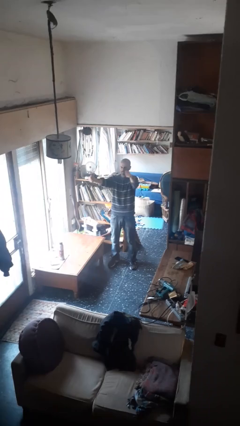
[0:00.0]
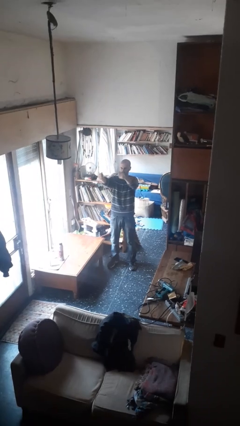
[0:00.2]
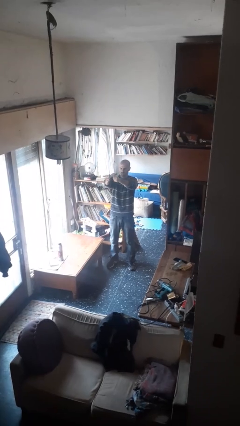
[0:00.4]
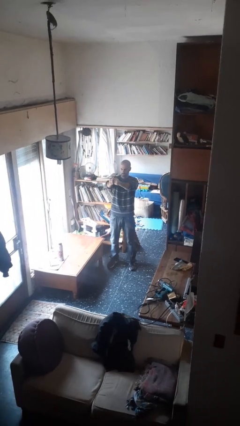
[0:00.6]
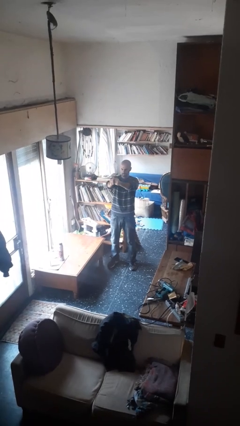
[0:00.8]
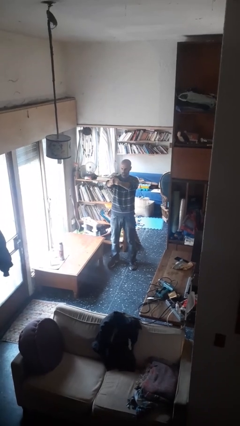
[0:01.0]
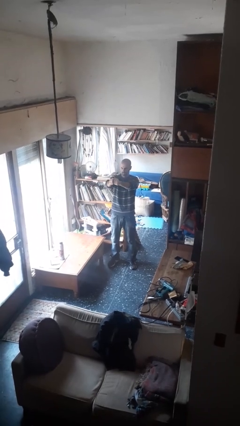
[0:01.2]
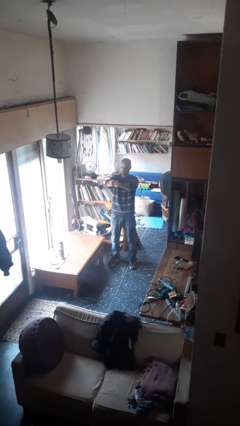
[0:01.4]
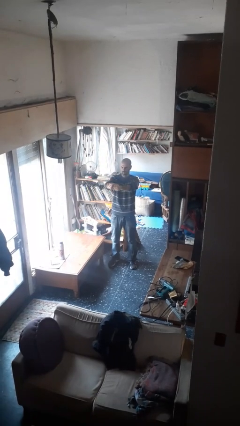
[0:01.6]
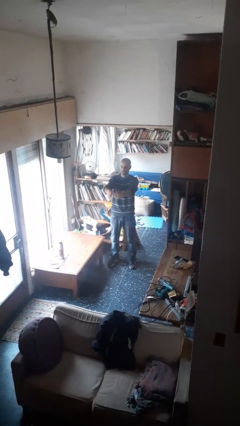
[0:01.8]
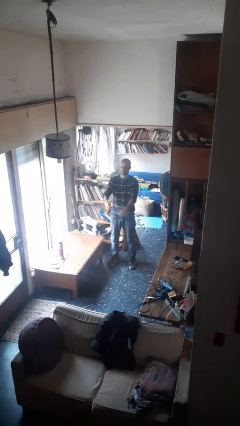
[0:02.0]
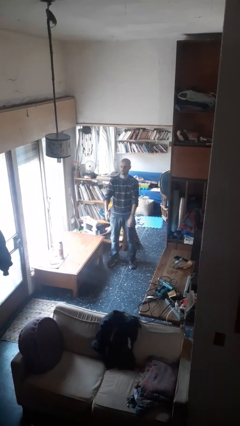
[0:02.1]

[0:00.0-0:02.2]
person gestures zoom out

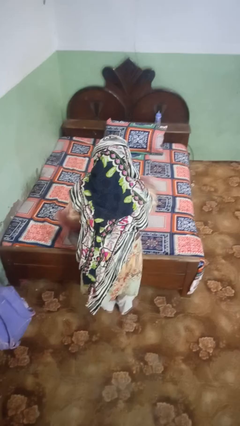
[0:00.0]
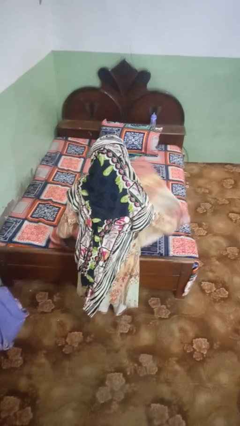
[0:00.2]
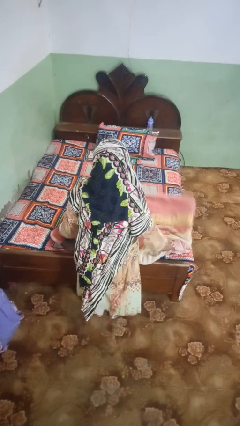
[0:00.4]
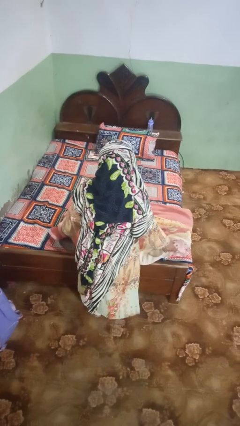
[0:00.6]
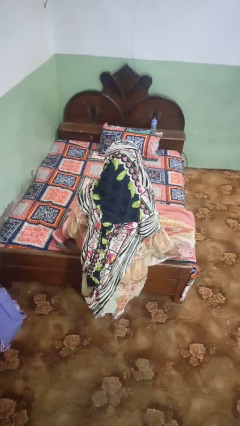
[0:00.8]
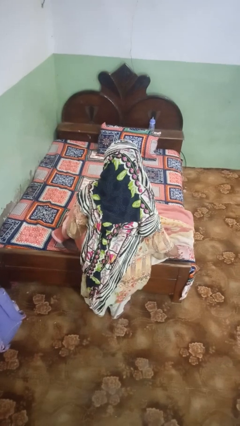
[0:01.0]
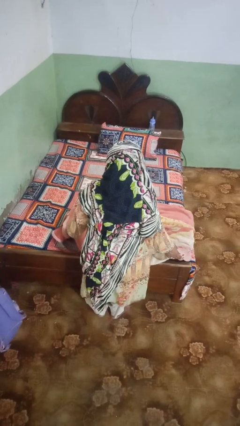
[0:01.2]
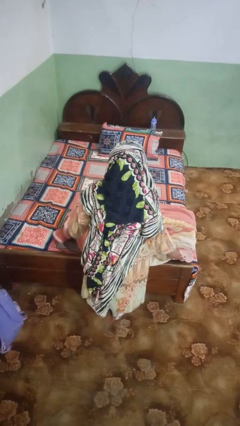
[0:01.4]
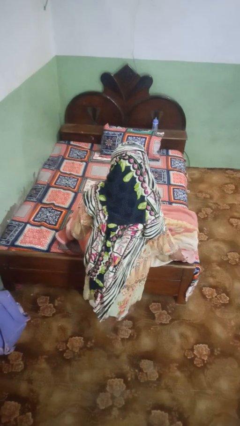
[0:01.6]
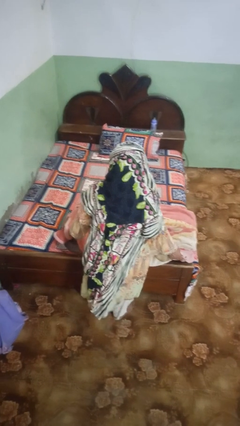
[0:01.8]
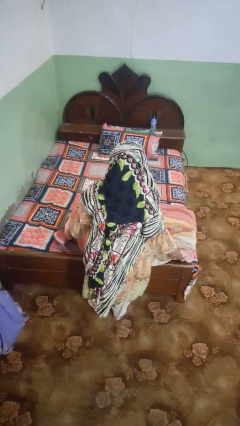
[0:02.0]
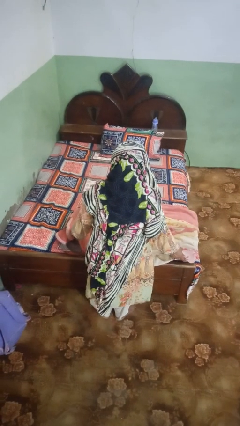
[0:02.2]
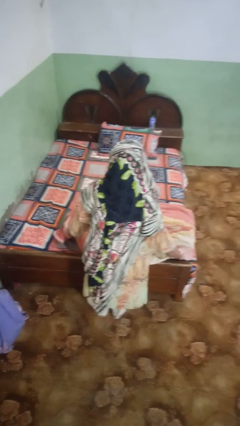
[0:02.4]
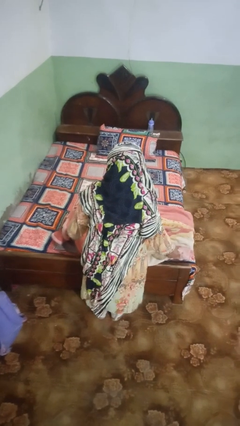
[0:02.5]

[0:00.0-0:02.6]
person unfolds blanket

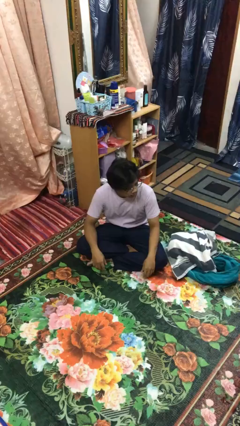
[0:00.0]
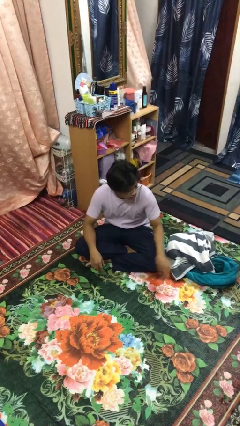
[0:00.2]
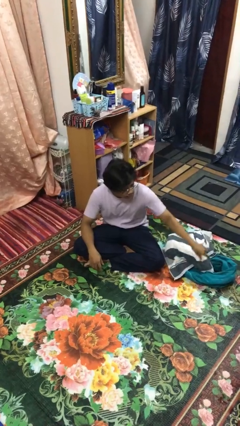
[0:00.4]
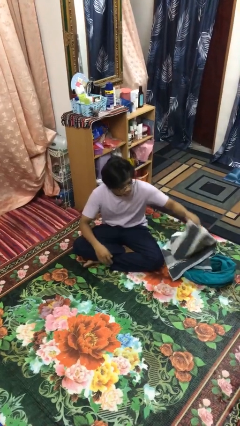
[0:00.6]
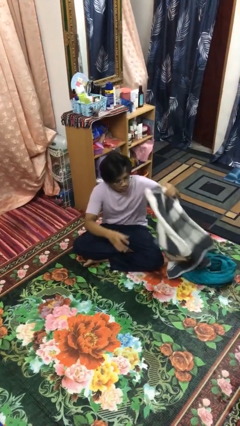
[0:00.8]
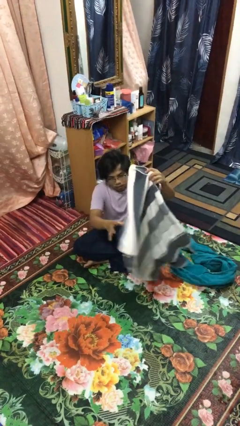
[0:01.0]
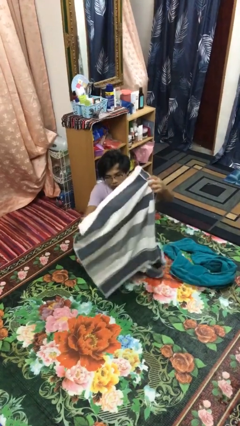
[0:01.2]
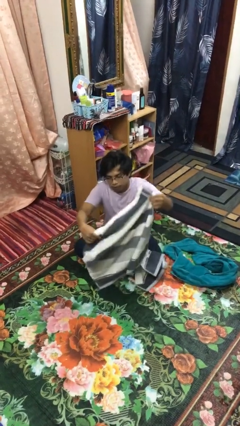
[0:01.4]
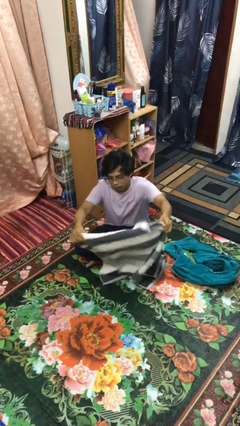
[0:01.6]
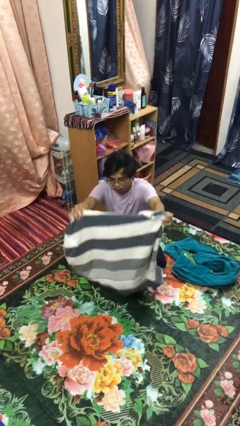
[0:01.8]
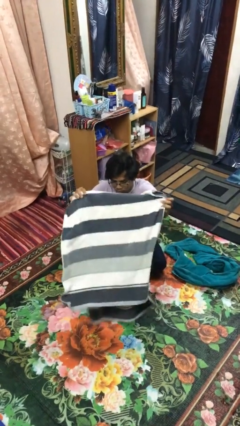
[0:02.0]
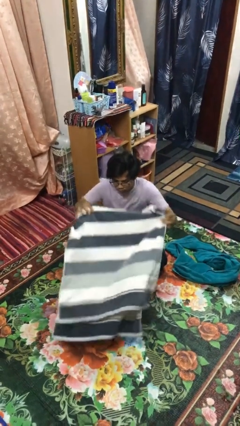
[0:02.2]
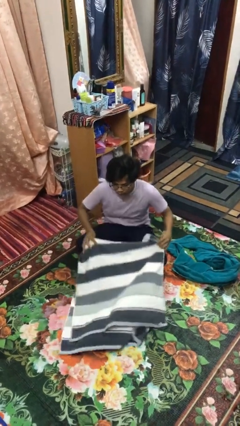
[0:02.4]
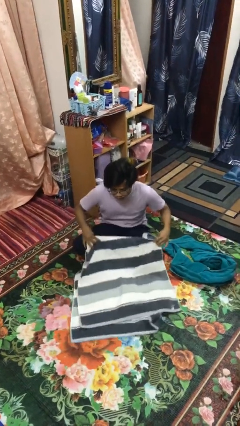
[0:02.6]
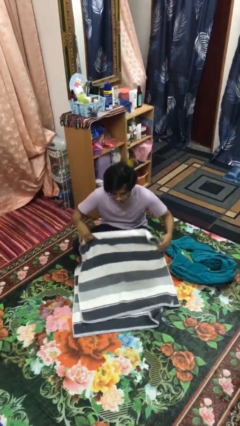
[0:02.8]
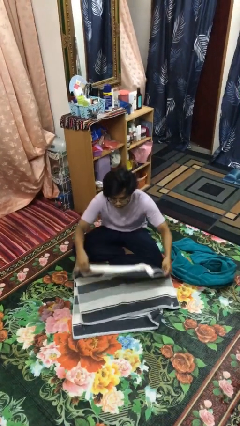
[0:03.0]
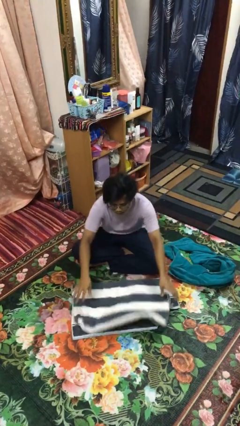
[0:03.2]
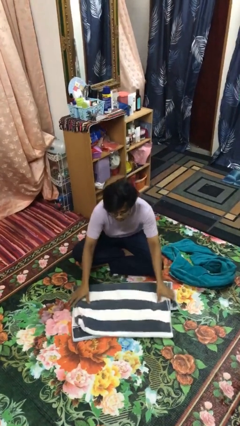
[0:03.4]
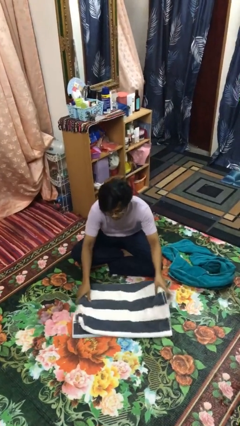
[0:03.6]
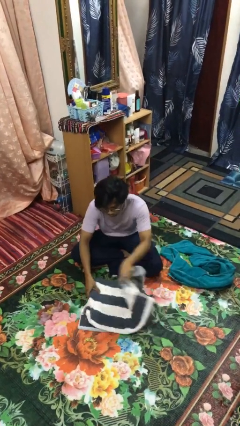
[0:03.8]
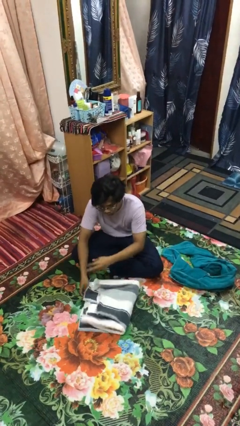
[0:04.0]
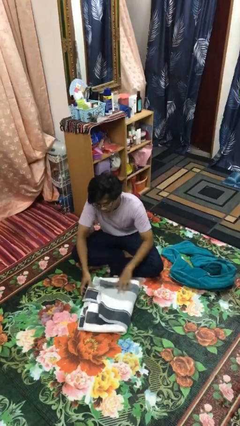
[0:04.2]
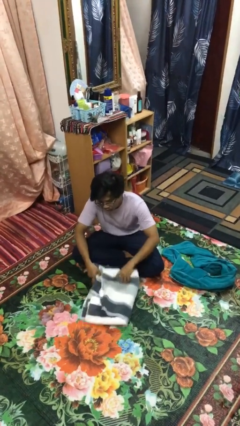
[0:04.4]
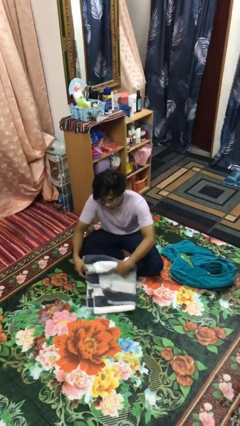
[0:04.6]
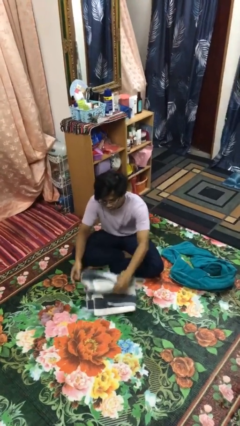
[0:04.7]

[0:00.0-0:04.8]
person folds towel

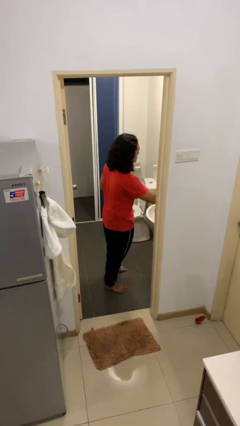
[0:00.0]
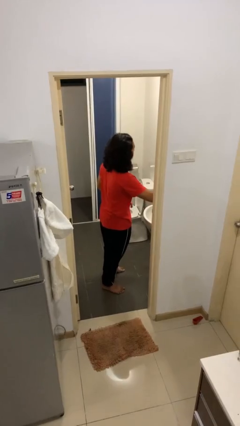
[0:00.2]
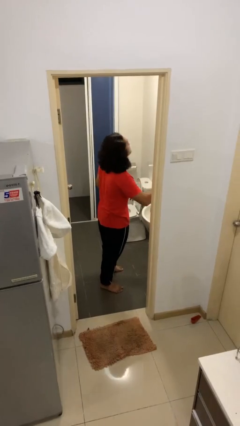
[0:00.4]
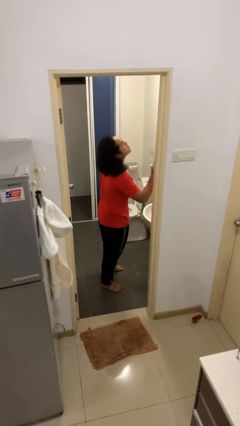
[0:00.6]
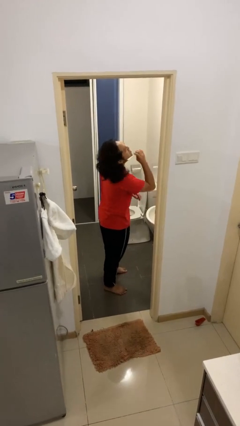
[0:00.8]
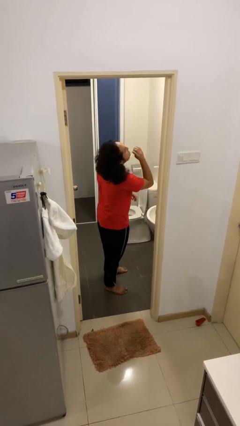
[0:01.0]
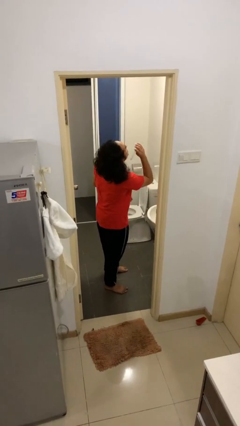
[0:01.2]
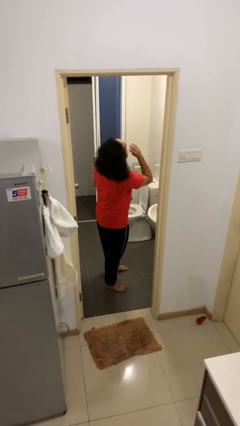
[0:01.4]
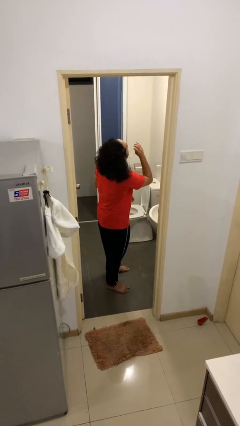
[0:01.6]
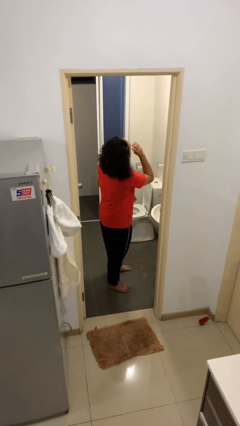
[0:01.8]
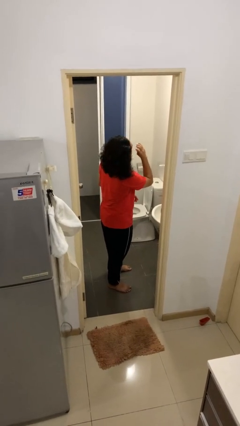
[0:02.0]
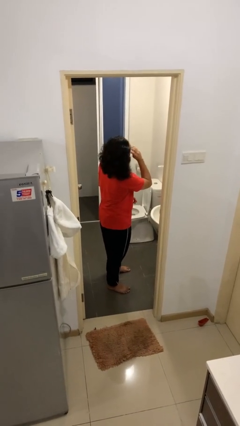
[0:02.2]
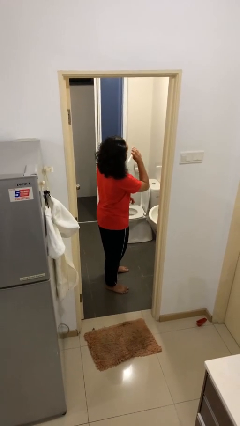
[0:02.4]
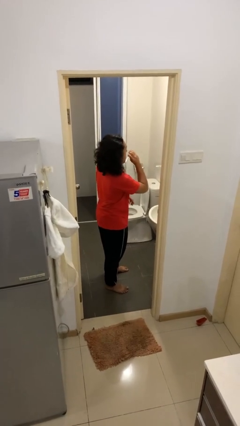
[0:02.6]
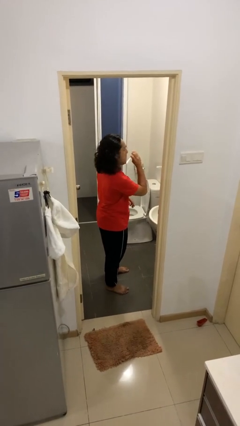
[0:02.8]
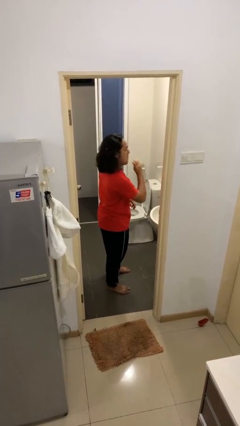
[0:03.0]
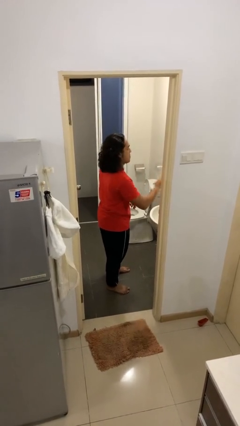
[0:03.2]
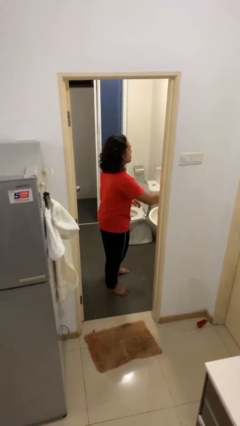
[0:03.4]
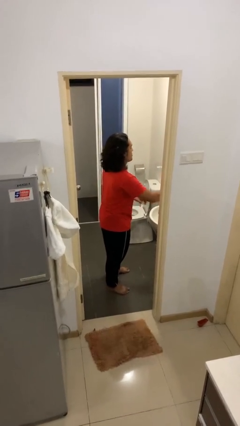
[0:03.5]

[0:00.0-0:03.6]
person shaves face

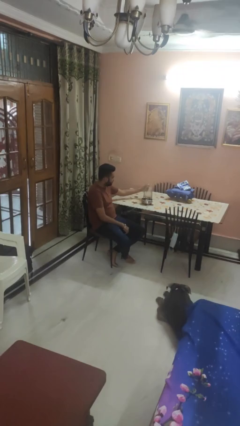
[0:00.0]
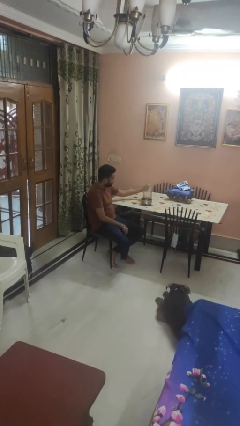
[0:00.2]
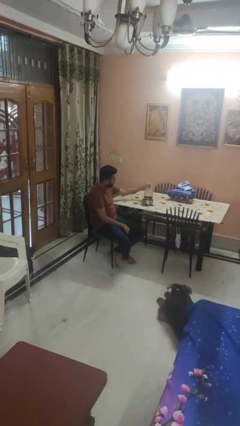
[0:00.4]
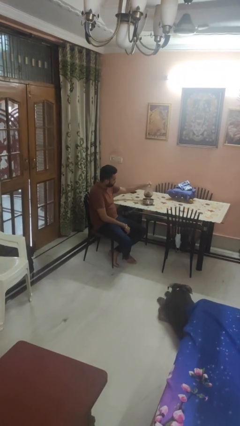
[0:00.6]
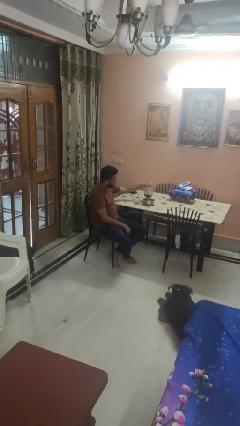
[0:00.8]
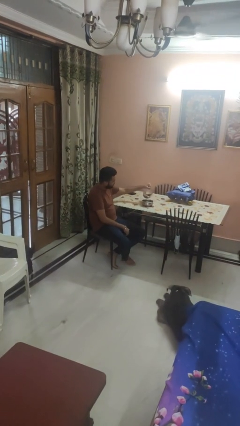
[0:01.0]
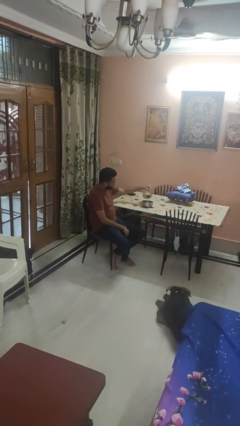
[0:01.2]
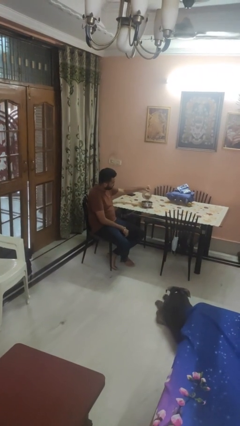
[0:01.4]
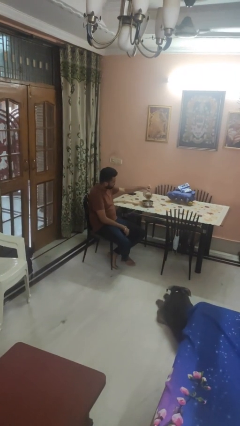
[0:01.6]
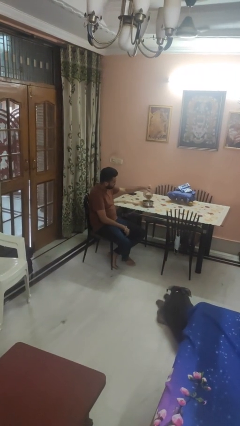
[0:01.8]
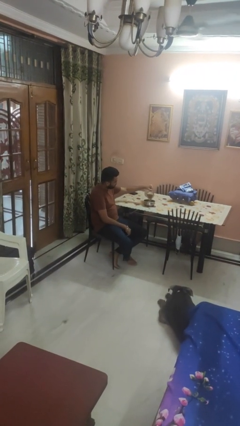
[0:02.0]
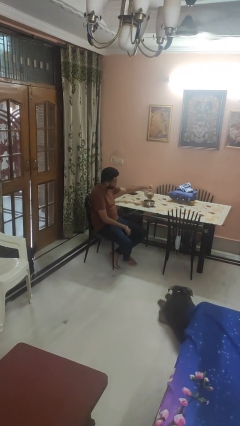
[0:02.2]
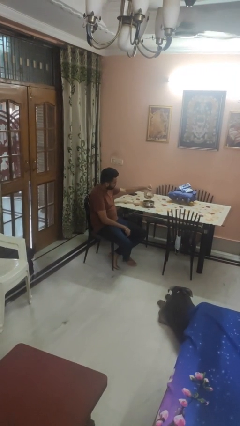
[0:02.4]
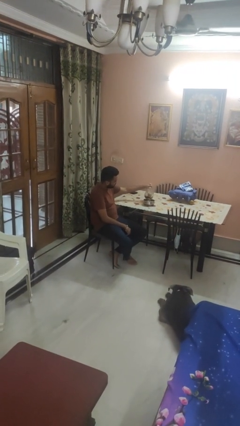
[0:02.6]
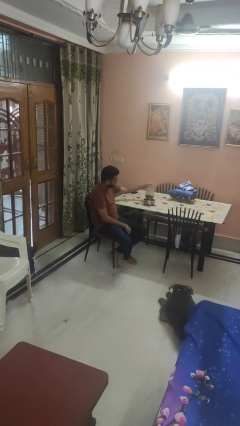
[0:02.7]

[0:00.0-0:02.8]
person pours into bowl

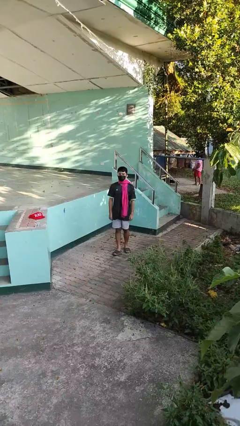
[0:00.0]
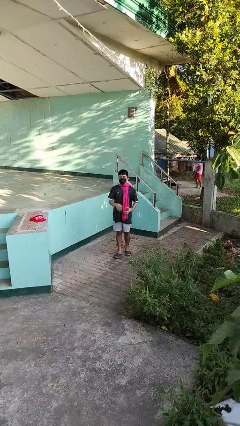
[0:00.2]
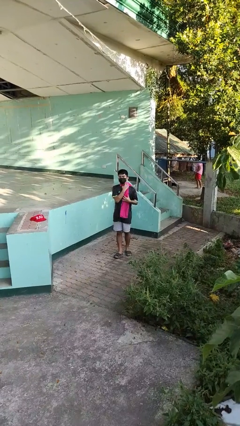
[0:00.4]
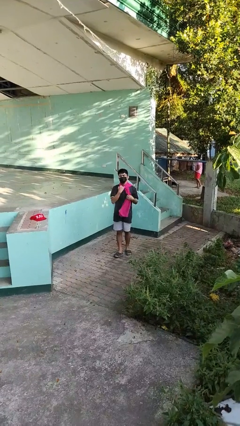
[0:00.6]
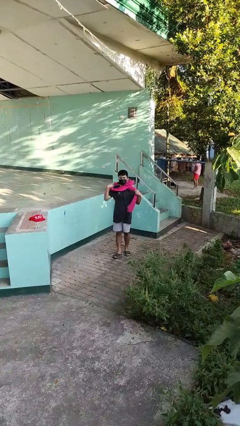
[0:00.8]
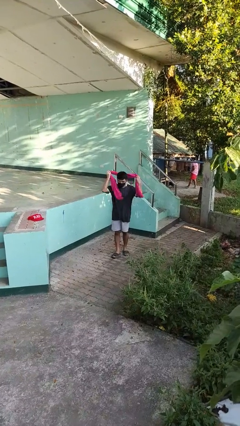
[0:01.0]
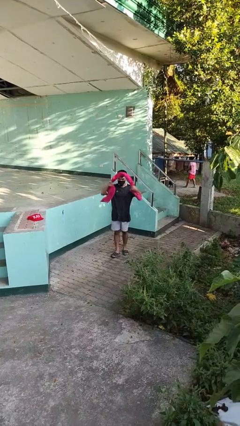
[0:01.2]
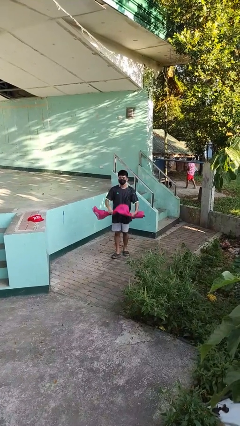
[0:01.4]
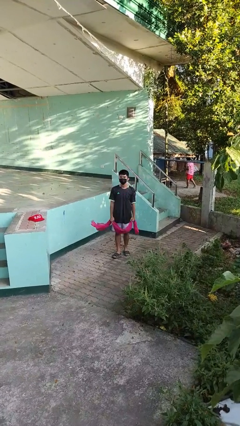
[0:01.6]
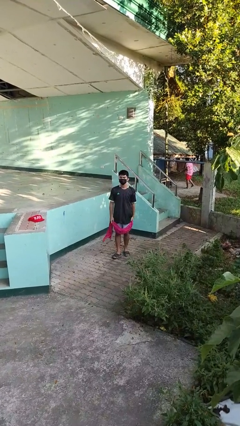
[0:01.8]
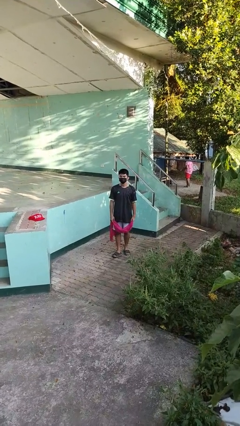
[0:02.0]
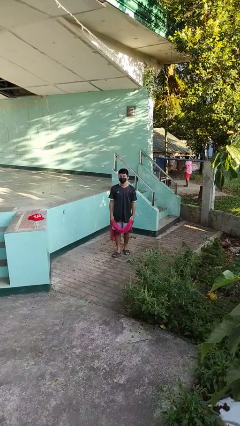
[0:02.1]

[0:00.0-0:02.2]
person takes off scarf
